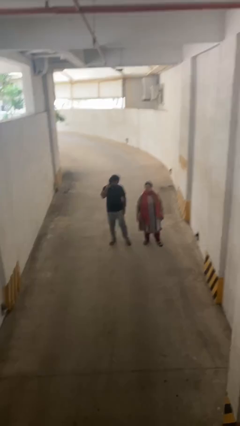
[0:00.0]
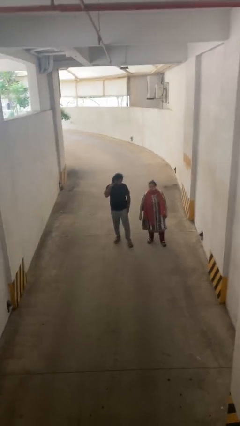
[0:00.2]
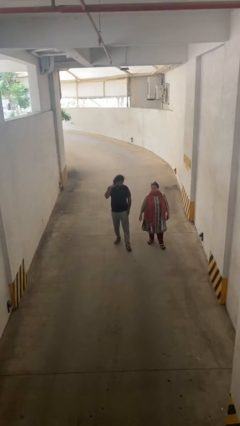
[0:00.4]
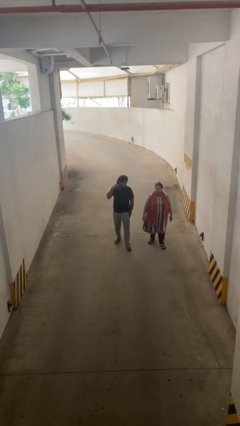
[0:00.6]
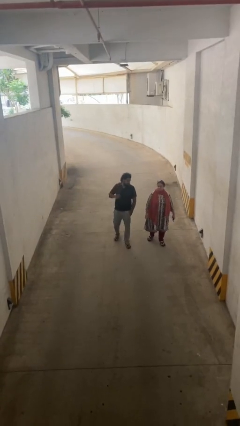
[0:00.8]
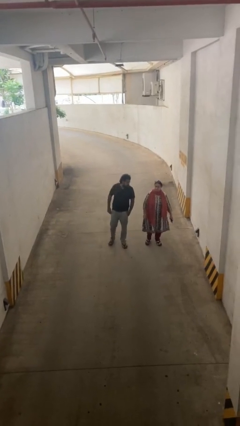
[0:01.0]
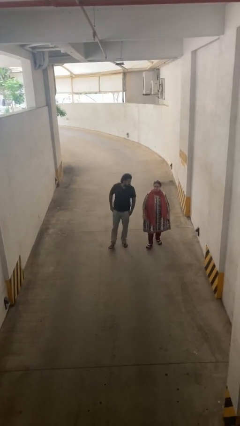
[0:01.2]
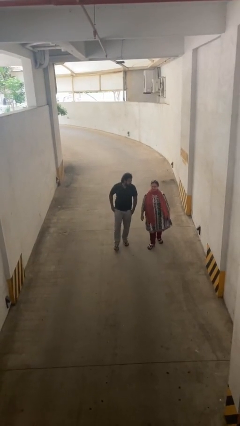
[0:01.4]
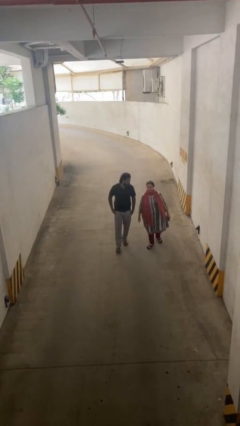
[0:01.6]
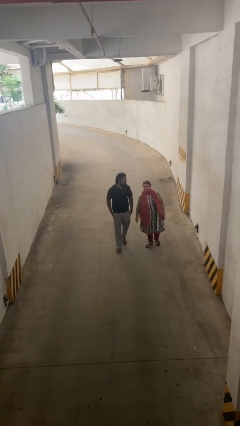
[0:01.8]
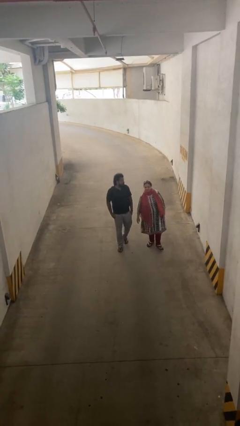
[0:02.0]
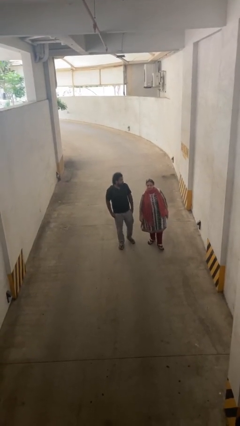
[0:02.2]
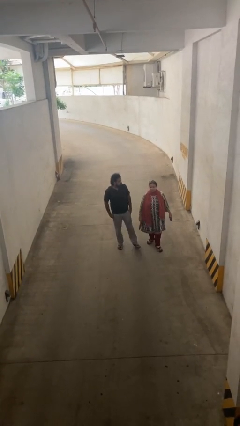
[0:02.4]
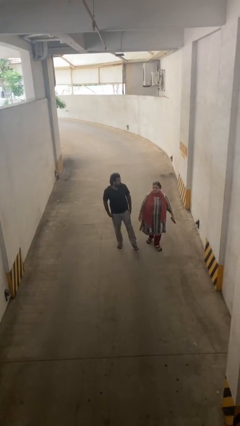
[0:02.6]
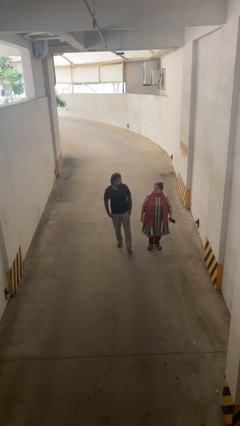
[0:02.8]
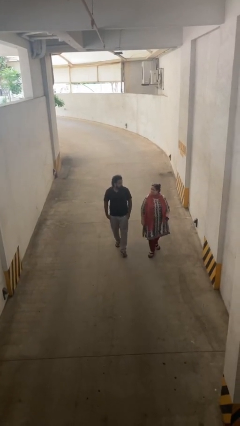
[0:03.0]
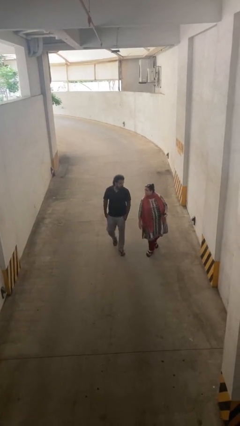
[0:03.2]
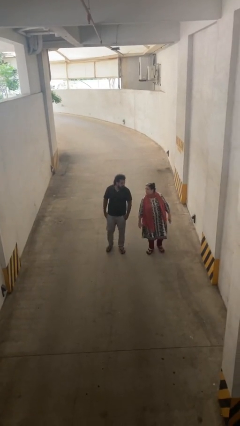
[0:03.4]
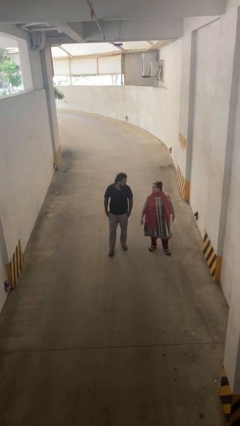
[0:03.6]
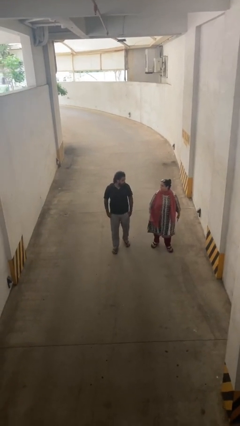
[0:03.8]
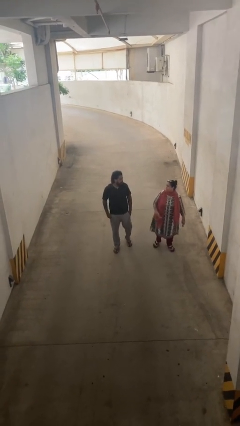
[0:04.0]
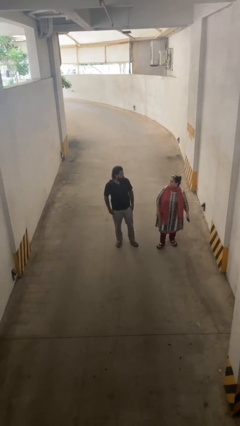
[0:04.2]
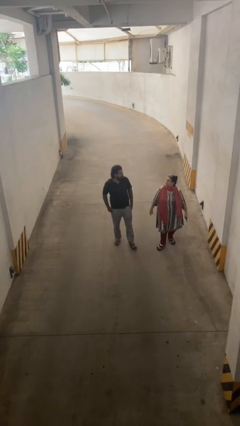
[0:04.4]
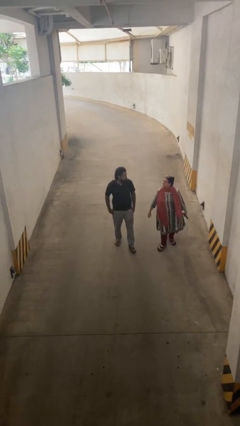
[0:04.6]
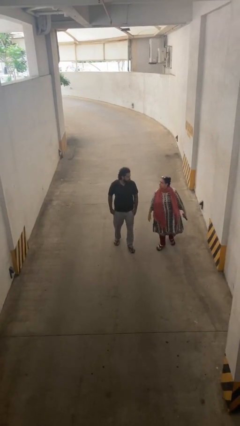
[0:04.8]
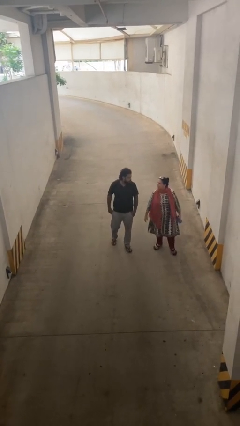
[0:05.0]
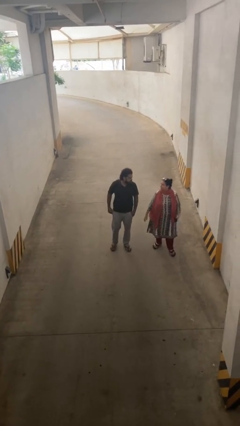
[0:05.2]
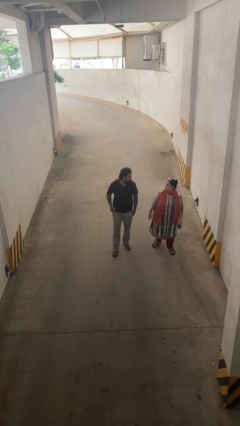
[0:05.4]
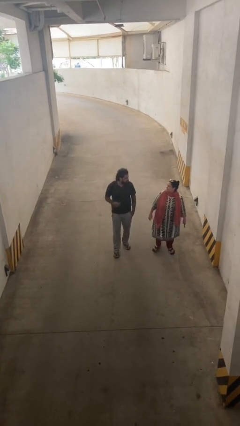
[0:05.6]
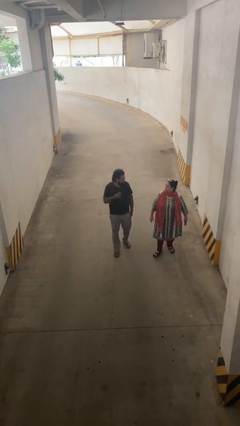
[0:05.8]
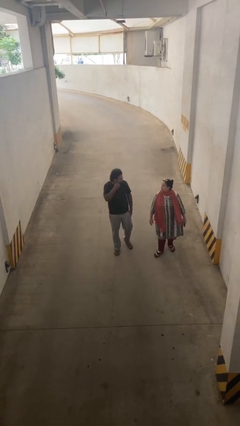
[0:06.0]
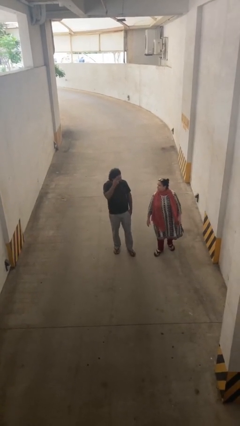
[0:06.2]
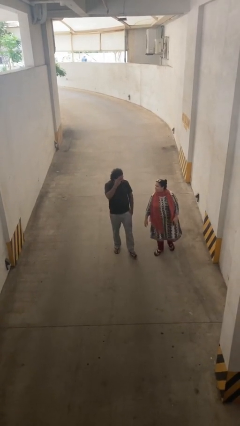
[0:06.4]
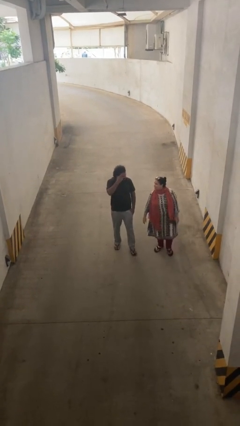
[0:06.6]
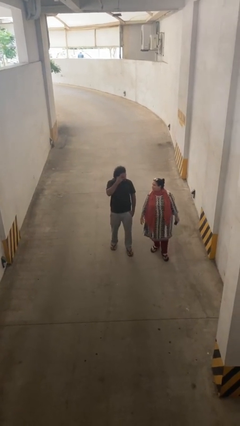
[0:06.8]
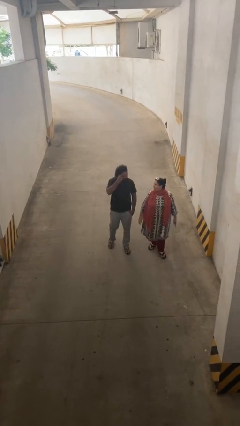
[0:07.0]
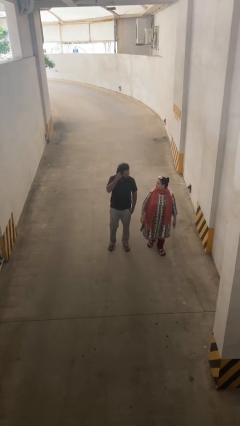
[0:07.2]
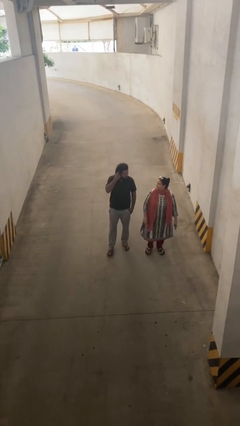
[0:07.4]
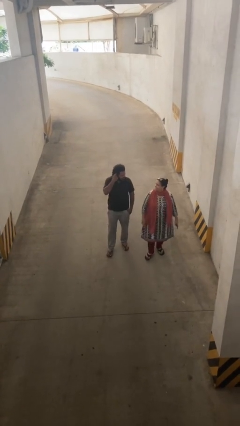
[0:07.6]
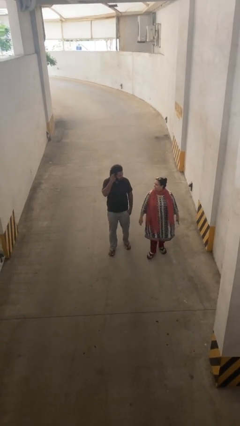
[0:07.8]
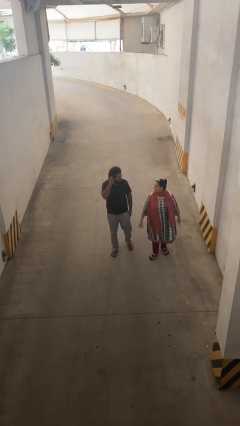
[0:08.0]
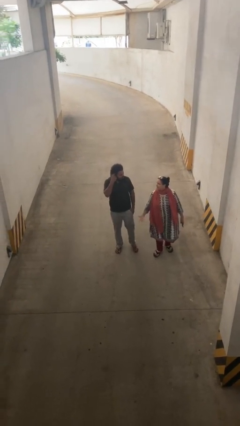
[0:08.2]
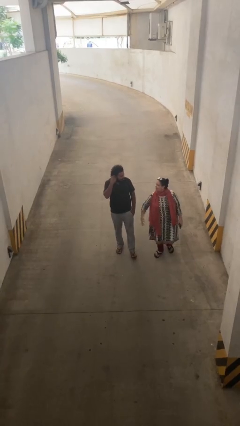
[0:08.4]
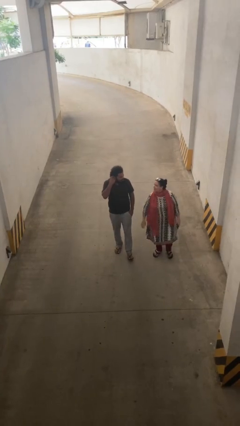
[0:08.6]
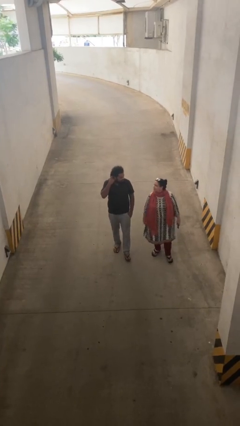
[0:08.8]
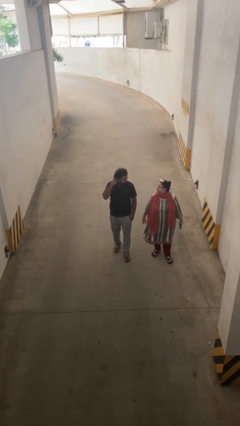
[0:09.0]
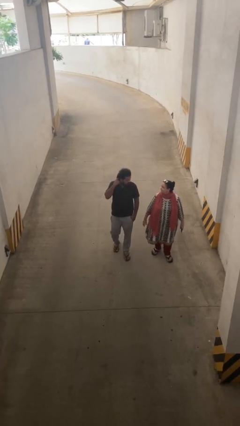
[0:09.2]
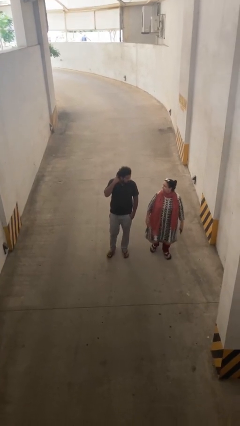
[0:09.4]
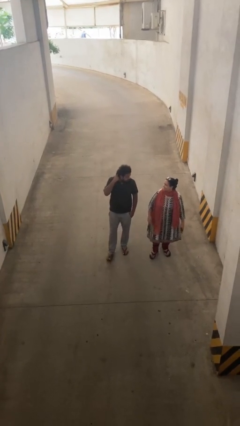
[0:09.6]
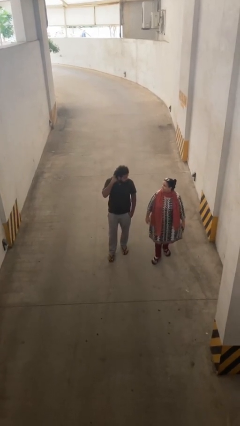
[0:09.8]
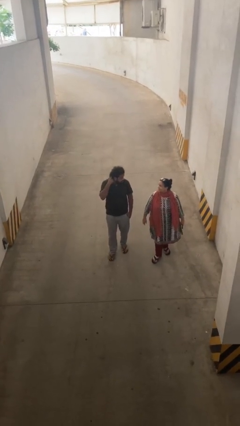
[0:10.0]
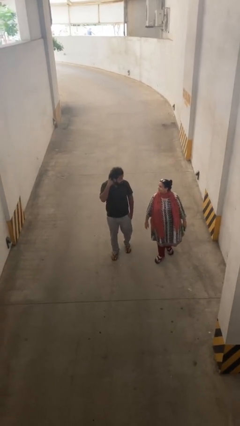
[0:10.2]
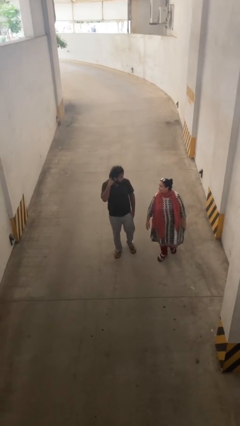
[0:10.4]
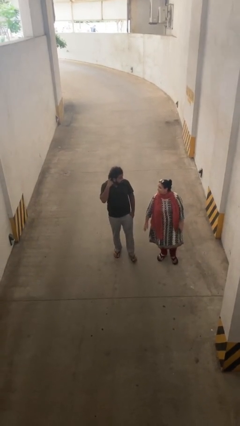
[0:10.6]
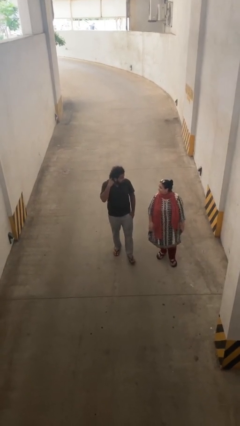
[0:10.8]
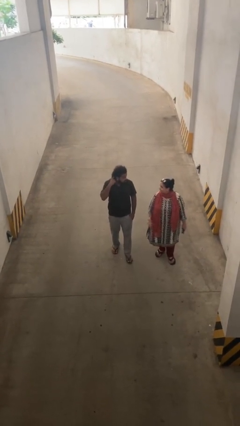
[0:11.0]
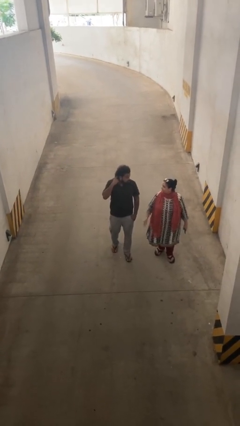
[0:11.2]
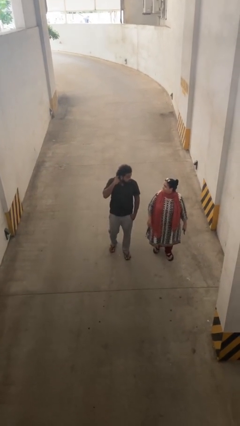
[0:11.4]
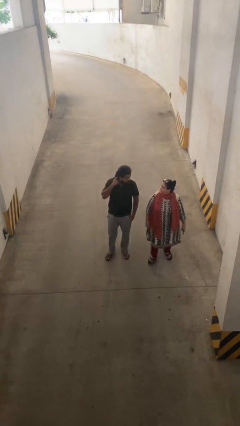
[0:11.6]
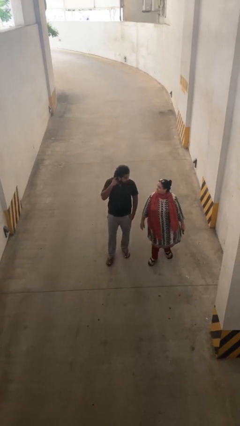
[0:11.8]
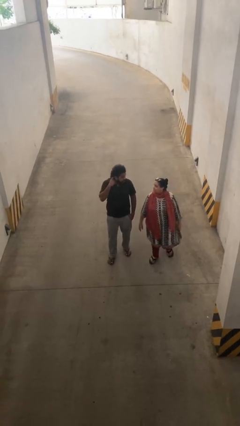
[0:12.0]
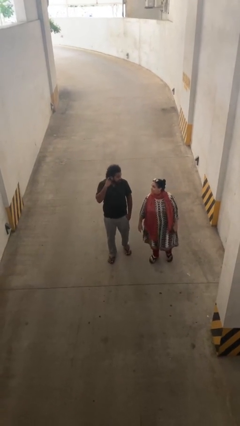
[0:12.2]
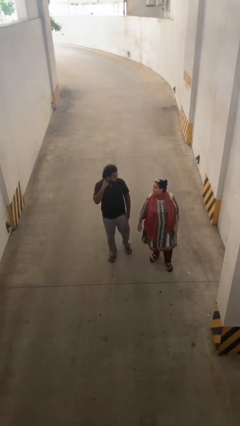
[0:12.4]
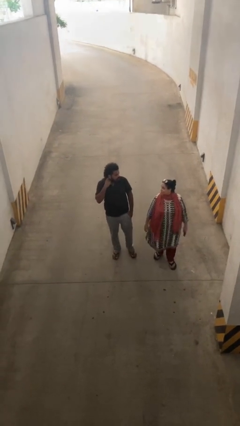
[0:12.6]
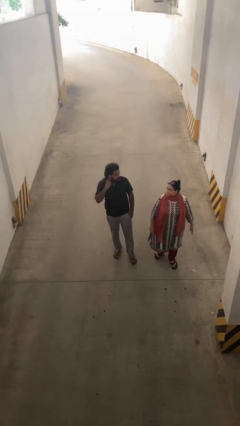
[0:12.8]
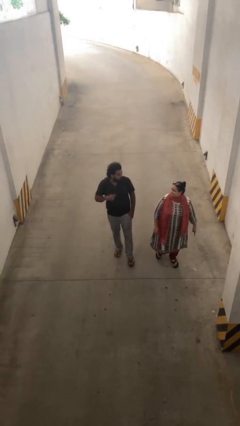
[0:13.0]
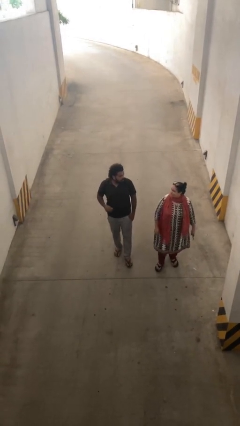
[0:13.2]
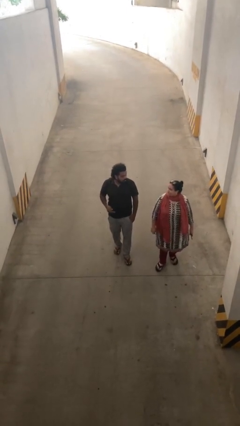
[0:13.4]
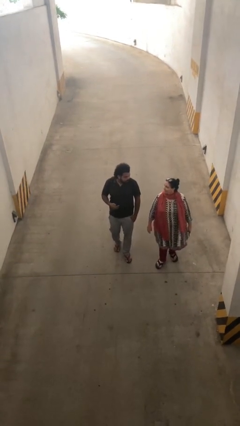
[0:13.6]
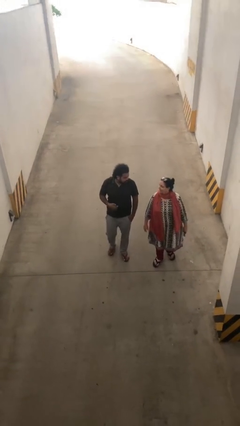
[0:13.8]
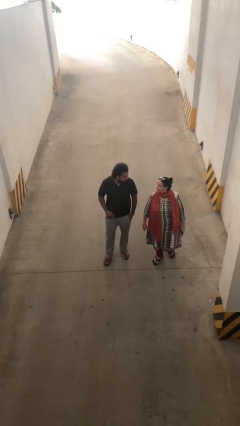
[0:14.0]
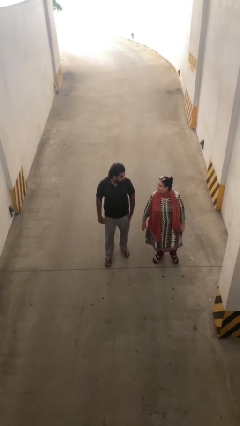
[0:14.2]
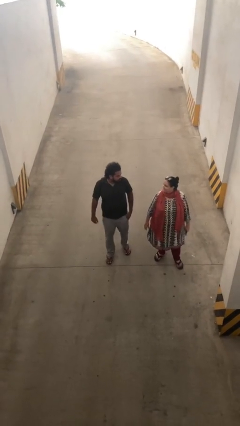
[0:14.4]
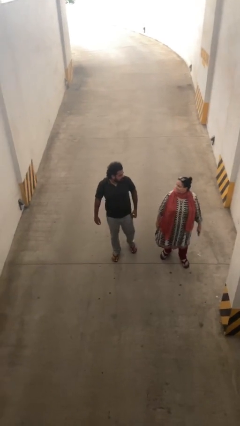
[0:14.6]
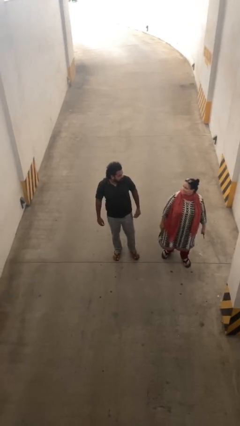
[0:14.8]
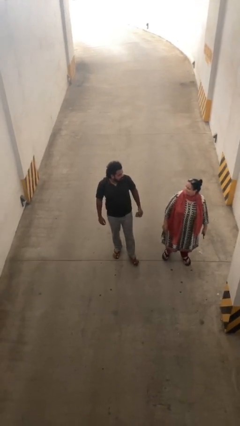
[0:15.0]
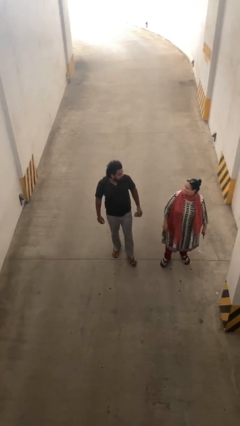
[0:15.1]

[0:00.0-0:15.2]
person talks to person

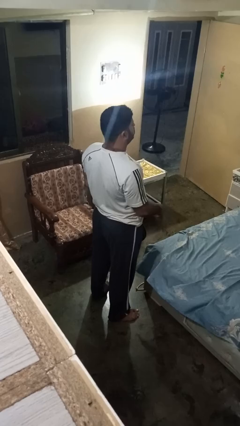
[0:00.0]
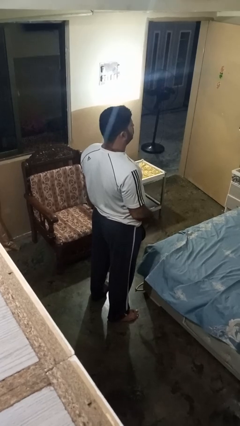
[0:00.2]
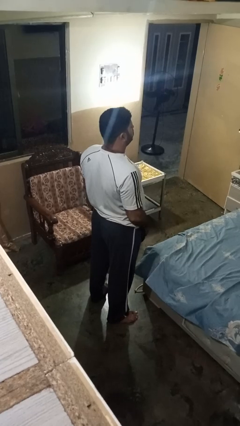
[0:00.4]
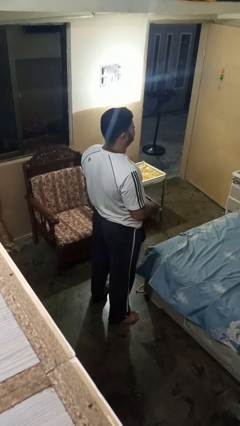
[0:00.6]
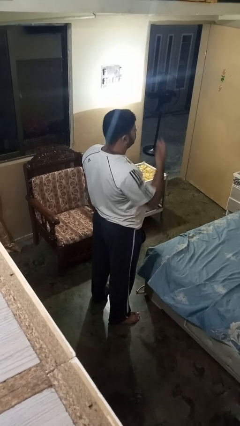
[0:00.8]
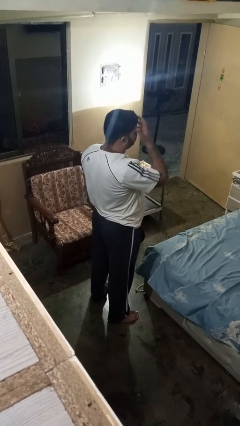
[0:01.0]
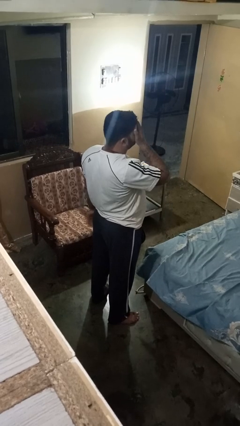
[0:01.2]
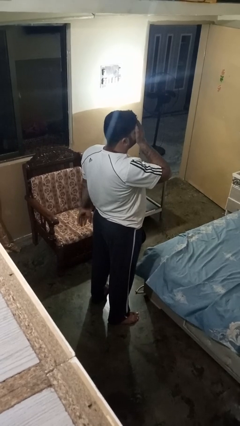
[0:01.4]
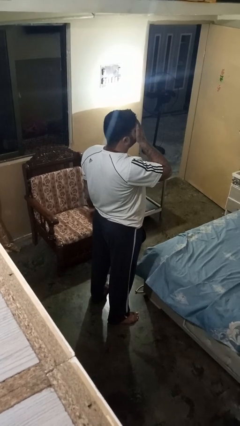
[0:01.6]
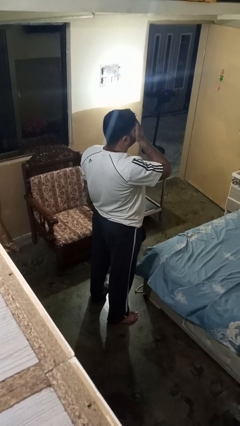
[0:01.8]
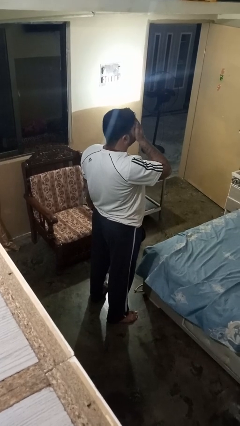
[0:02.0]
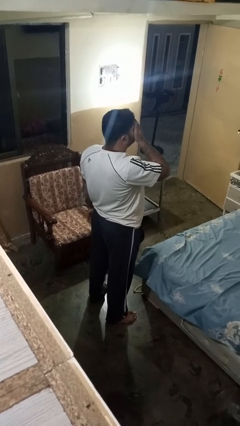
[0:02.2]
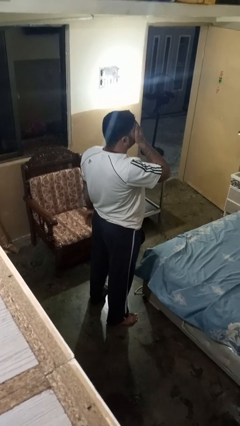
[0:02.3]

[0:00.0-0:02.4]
person covers face with hands

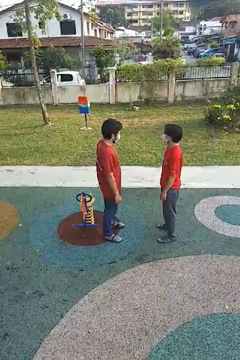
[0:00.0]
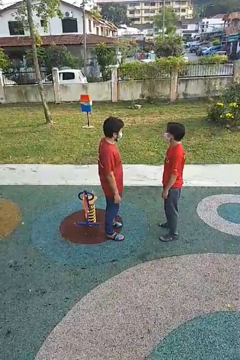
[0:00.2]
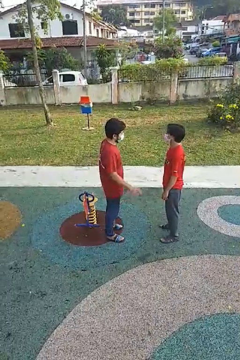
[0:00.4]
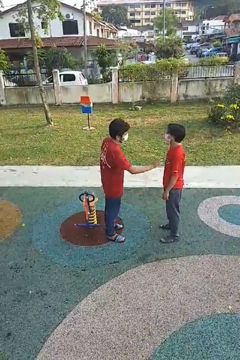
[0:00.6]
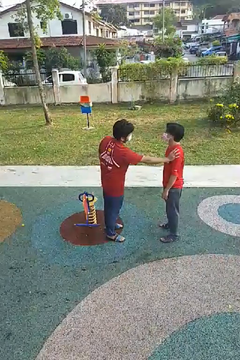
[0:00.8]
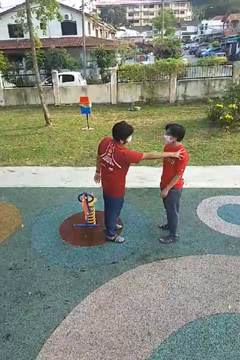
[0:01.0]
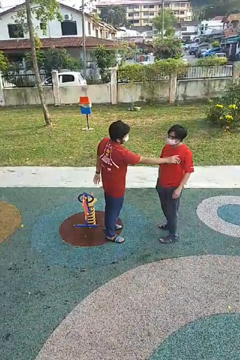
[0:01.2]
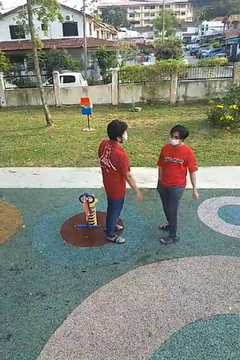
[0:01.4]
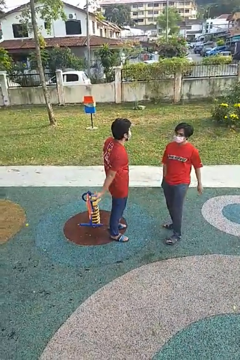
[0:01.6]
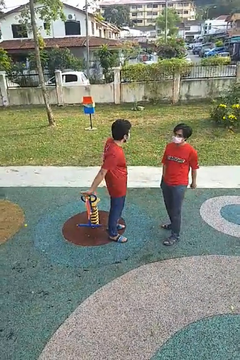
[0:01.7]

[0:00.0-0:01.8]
person shoves person
